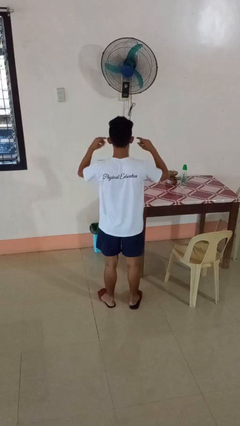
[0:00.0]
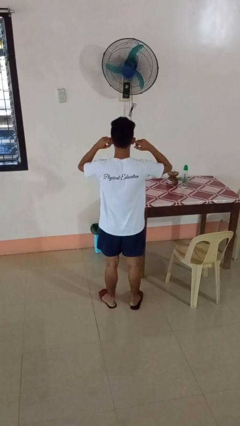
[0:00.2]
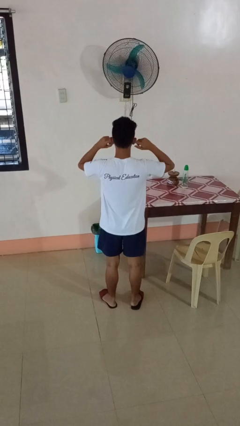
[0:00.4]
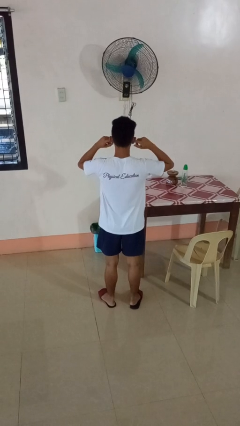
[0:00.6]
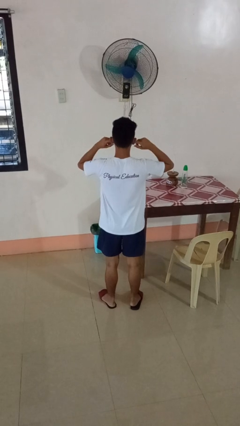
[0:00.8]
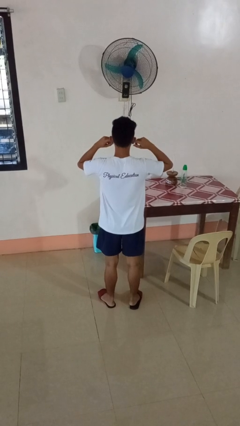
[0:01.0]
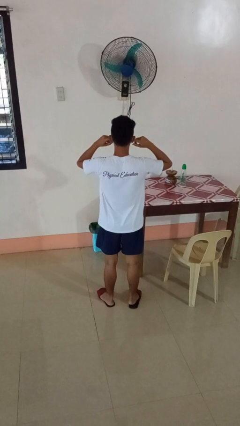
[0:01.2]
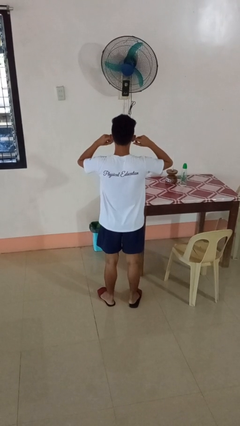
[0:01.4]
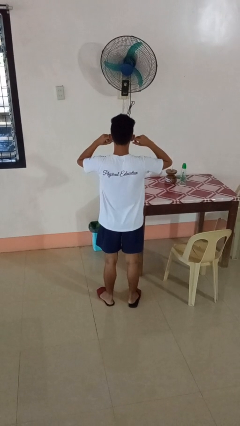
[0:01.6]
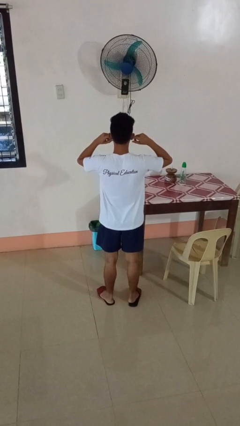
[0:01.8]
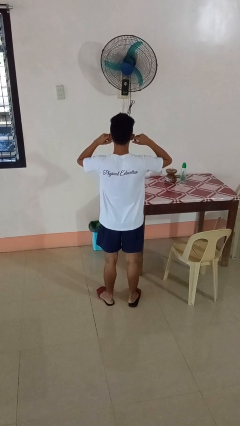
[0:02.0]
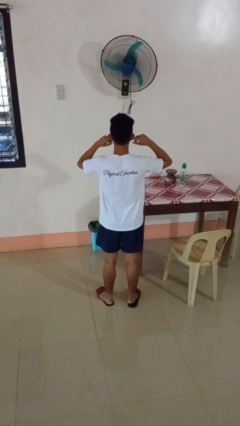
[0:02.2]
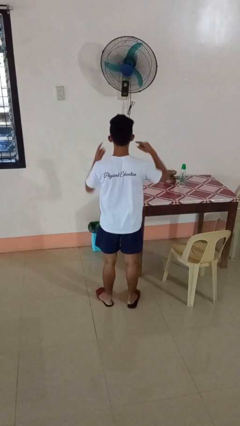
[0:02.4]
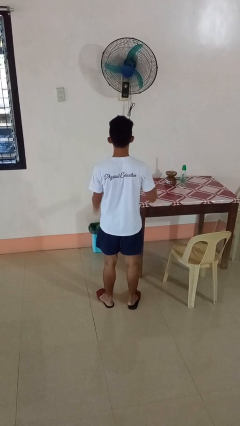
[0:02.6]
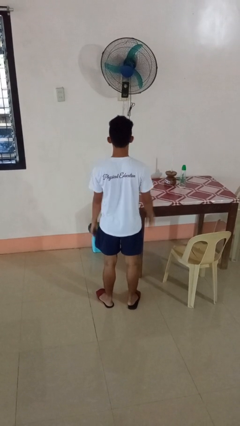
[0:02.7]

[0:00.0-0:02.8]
person puts fingers in ear

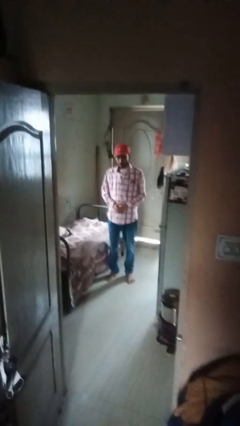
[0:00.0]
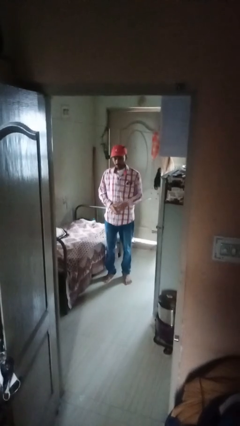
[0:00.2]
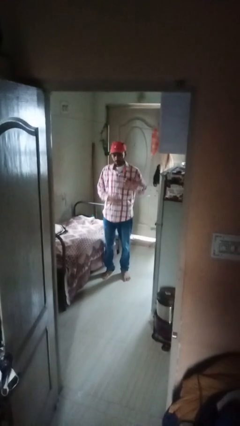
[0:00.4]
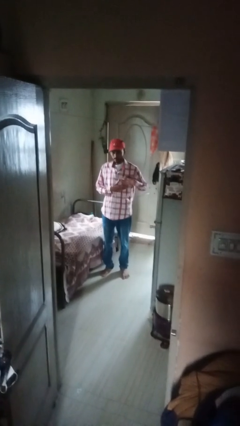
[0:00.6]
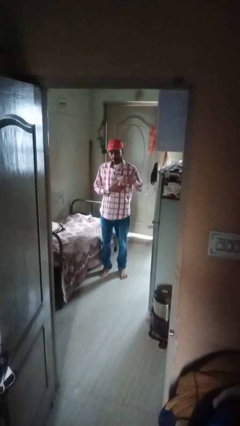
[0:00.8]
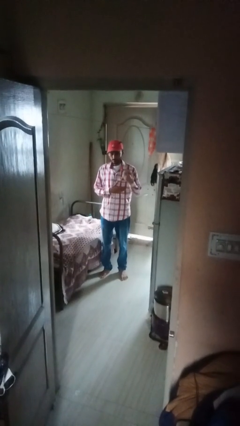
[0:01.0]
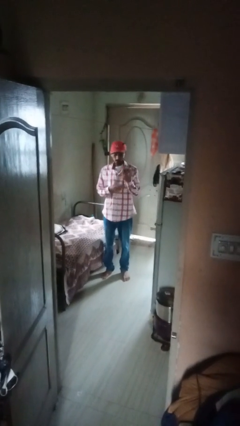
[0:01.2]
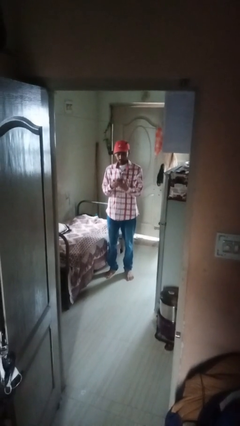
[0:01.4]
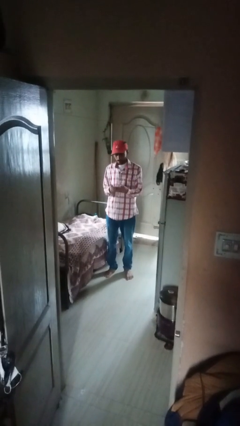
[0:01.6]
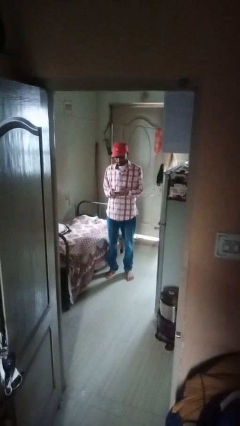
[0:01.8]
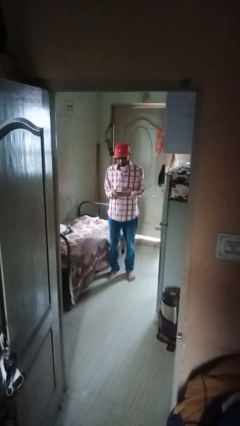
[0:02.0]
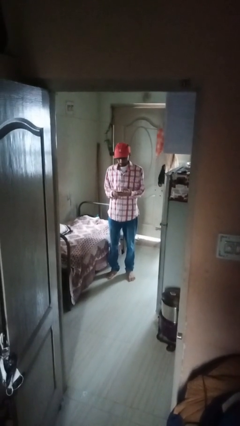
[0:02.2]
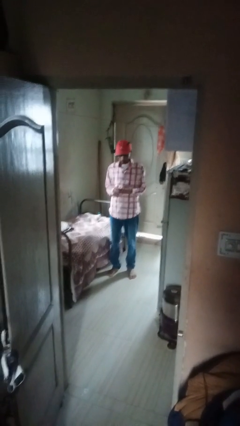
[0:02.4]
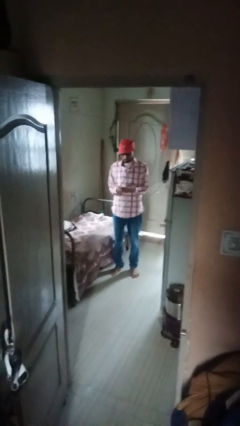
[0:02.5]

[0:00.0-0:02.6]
person takes phone from pocket

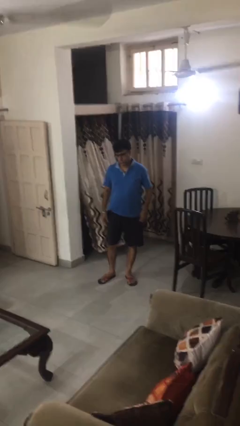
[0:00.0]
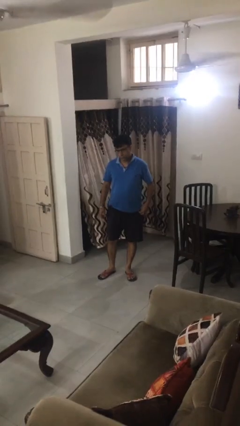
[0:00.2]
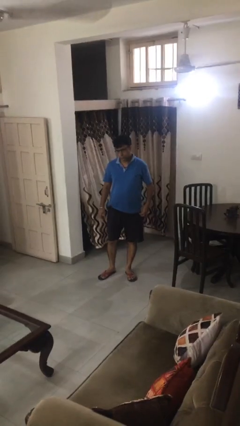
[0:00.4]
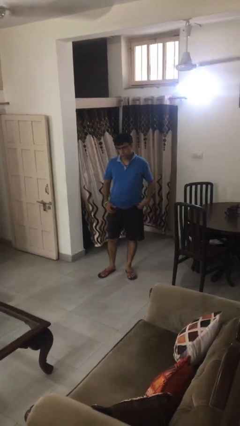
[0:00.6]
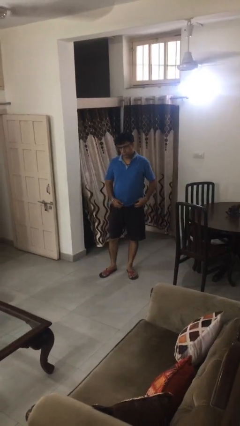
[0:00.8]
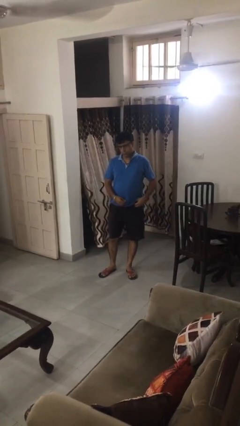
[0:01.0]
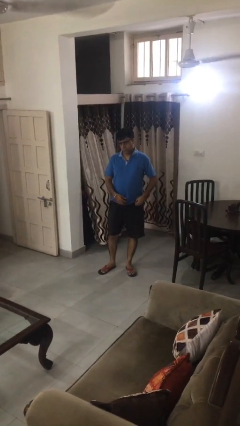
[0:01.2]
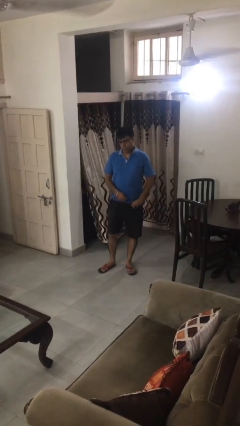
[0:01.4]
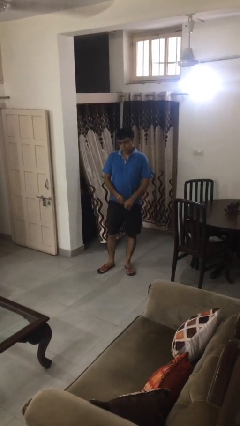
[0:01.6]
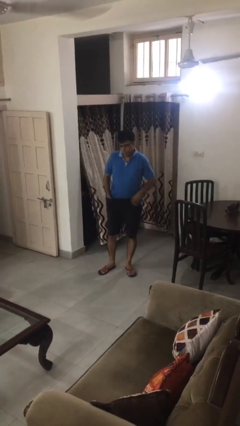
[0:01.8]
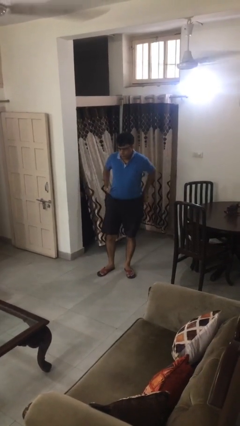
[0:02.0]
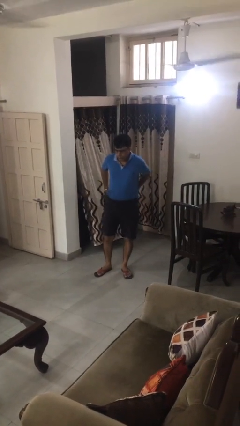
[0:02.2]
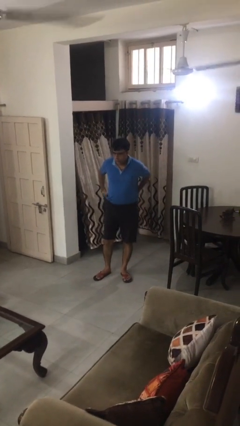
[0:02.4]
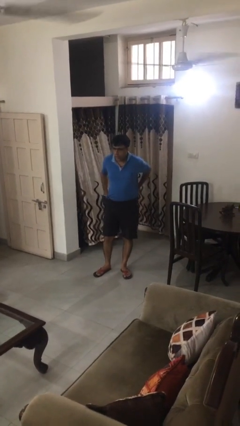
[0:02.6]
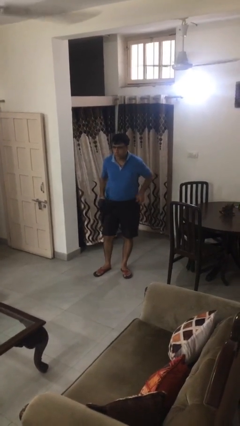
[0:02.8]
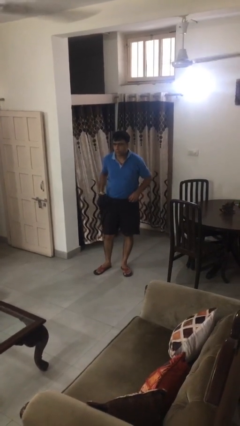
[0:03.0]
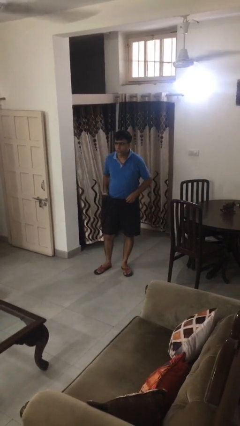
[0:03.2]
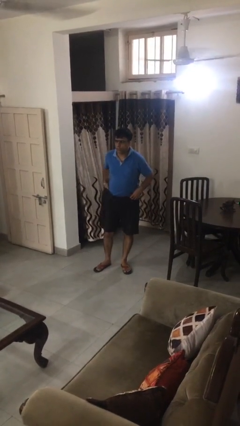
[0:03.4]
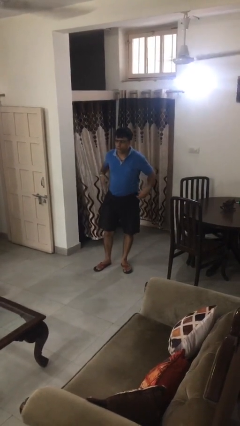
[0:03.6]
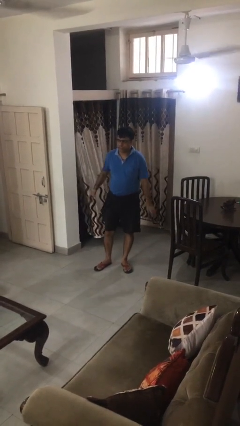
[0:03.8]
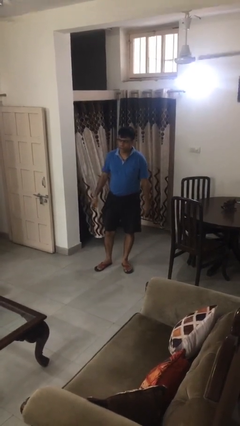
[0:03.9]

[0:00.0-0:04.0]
person tucks in shirt

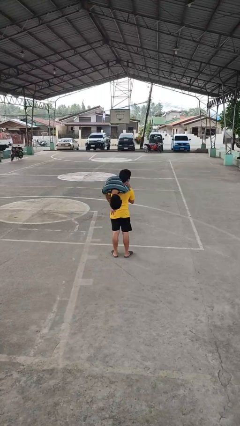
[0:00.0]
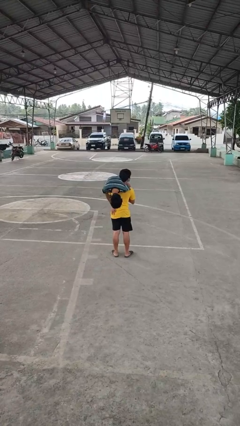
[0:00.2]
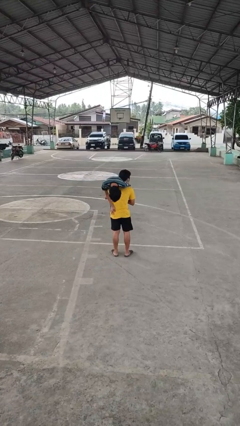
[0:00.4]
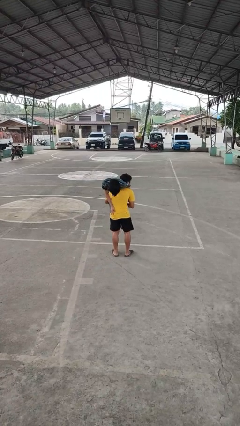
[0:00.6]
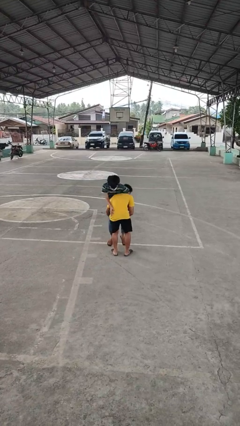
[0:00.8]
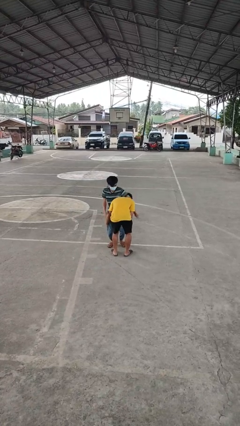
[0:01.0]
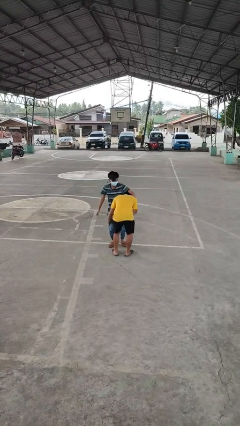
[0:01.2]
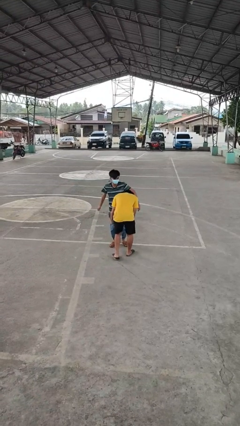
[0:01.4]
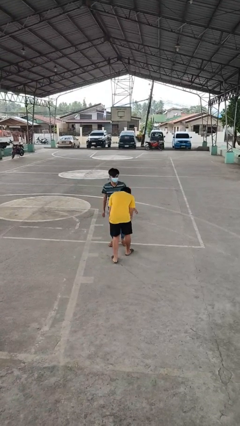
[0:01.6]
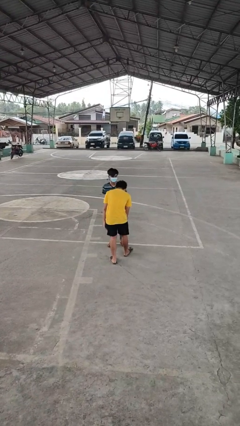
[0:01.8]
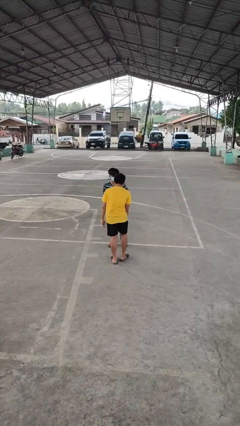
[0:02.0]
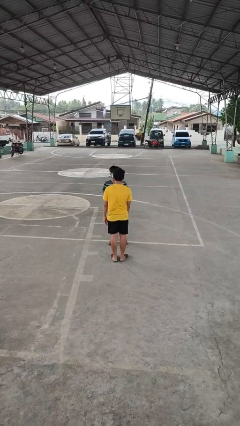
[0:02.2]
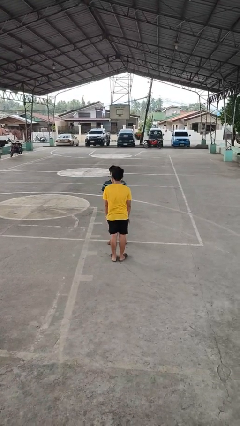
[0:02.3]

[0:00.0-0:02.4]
person puts down person

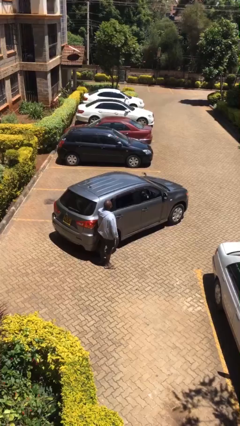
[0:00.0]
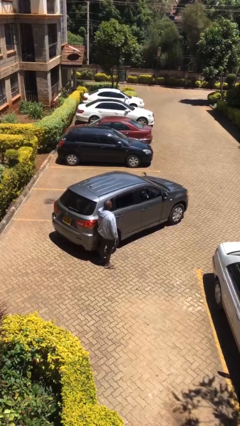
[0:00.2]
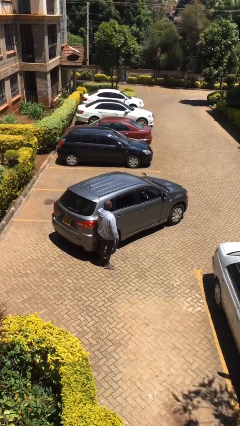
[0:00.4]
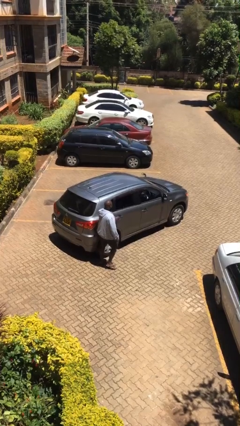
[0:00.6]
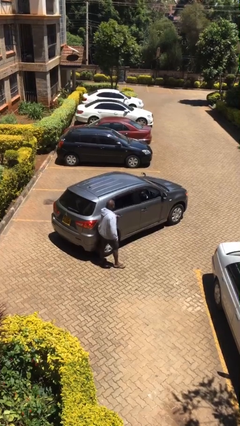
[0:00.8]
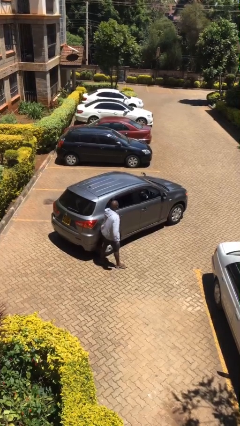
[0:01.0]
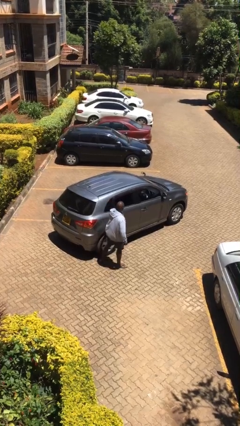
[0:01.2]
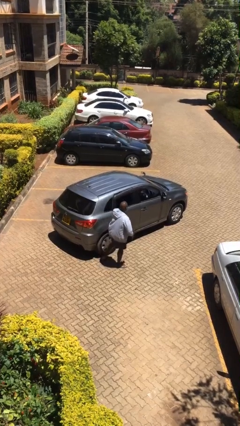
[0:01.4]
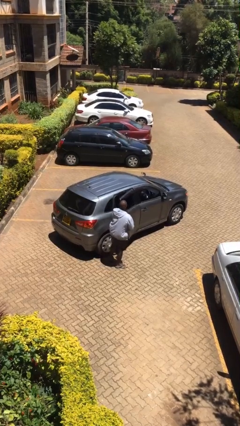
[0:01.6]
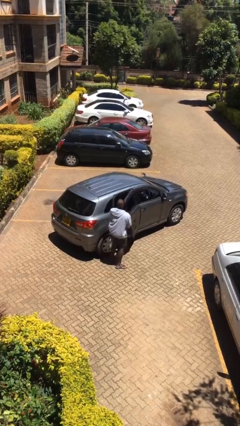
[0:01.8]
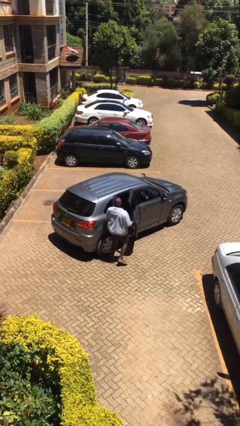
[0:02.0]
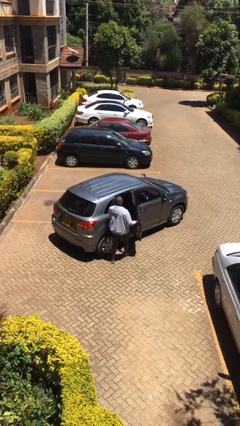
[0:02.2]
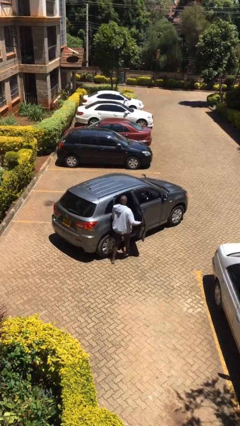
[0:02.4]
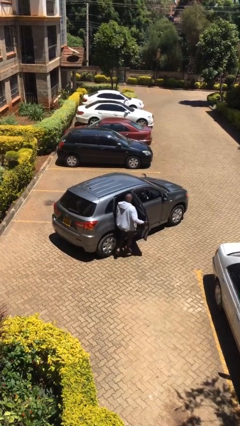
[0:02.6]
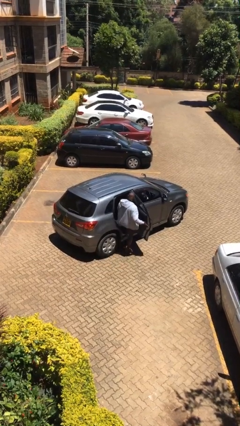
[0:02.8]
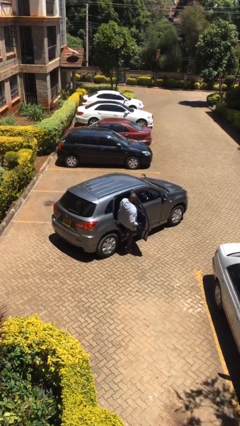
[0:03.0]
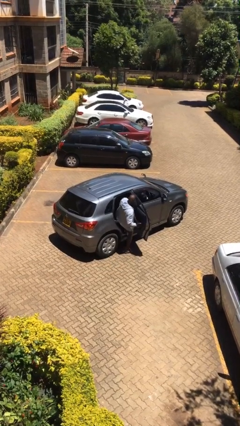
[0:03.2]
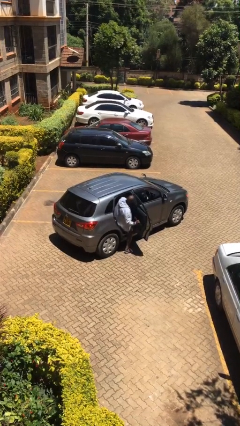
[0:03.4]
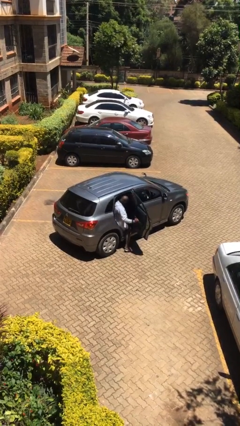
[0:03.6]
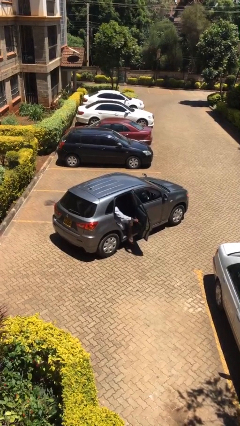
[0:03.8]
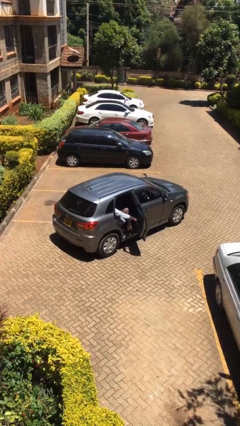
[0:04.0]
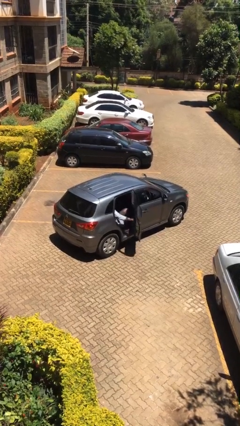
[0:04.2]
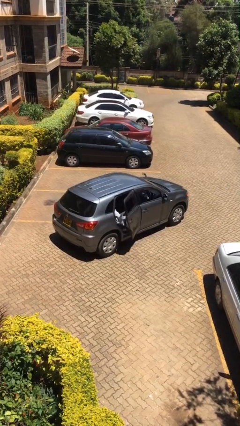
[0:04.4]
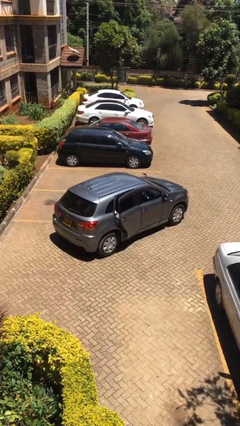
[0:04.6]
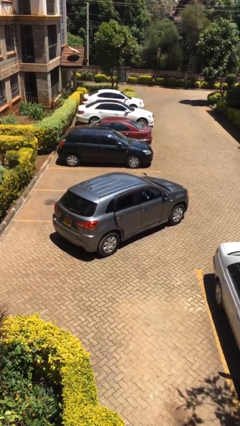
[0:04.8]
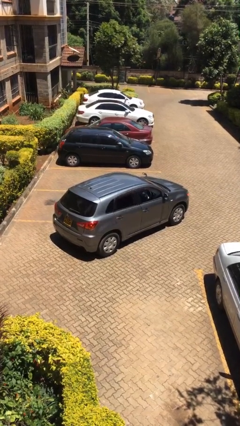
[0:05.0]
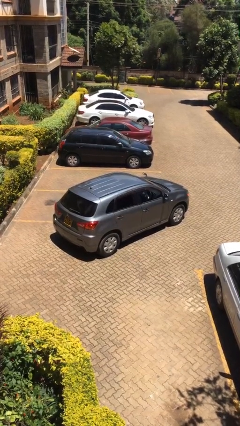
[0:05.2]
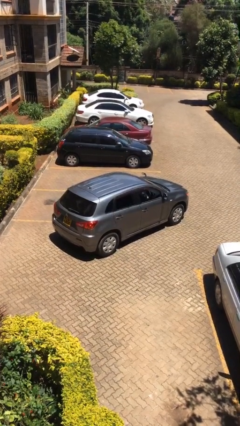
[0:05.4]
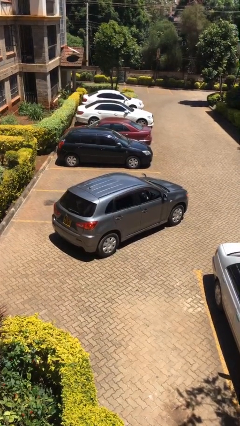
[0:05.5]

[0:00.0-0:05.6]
car picks up person
